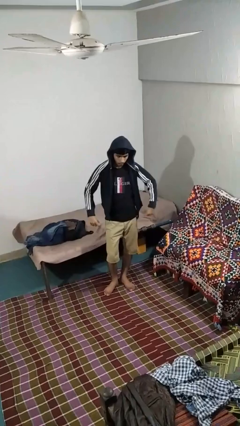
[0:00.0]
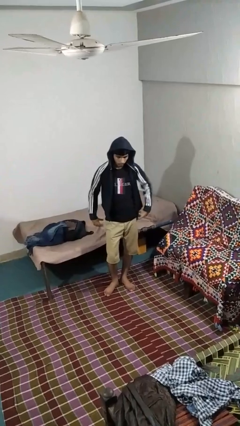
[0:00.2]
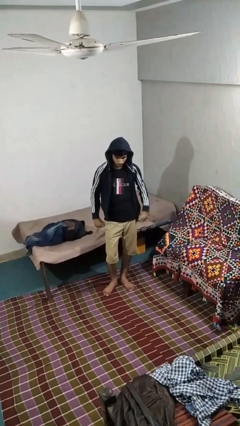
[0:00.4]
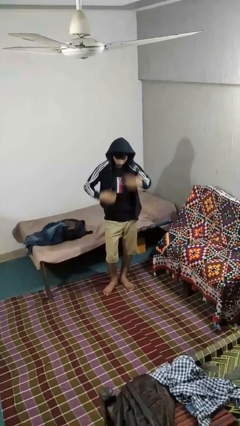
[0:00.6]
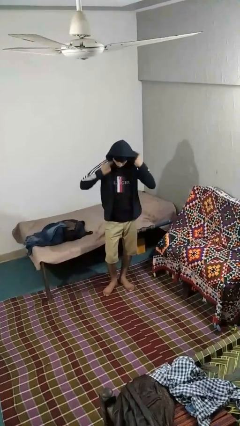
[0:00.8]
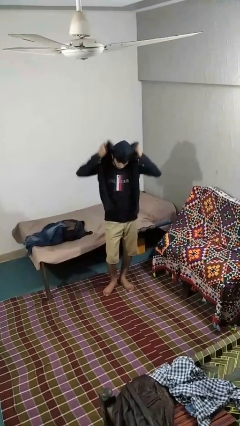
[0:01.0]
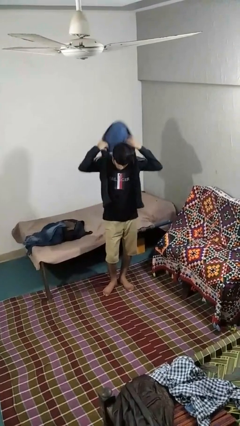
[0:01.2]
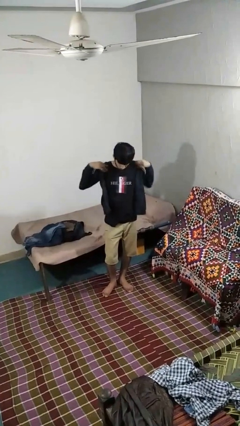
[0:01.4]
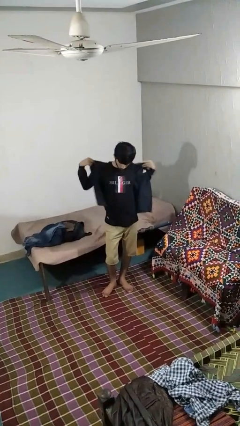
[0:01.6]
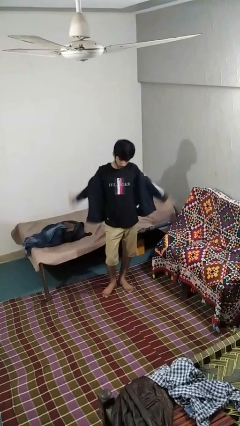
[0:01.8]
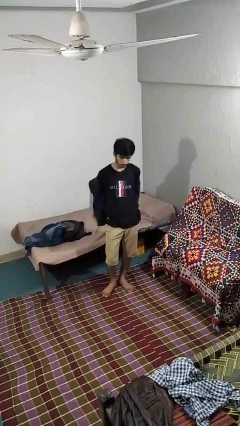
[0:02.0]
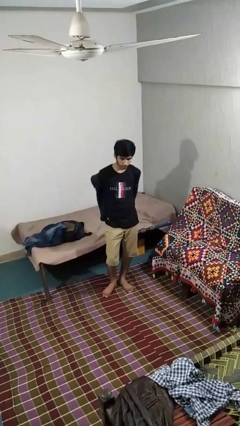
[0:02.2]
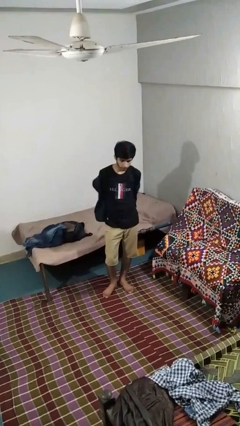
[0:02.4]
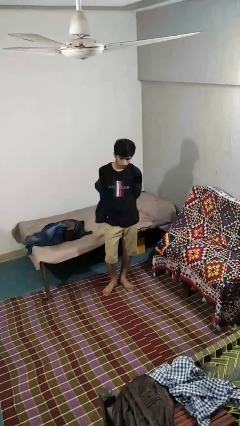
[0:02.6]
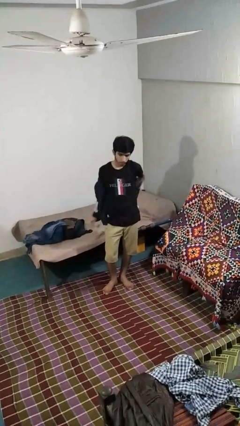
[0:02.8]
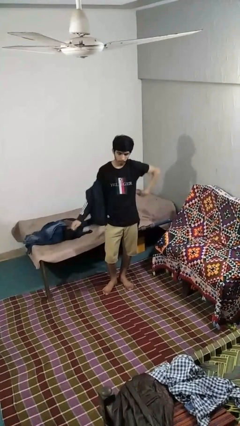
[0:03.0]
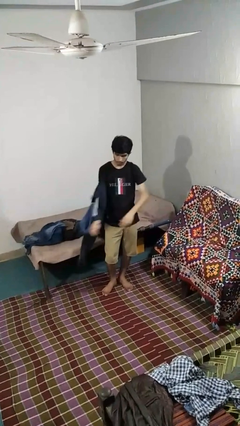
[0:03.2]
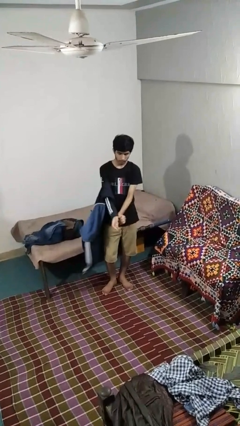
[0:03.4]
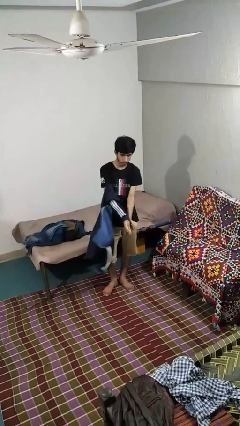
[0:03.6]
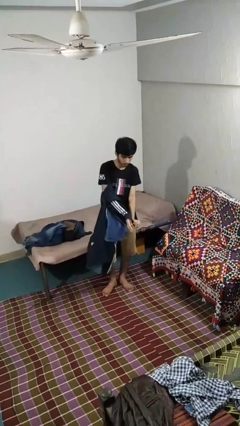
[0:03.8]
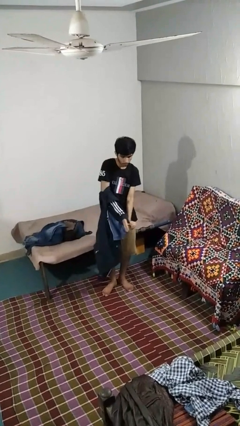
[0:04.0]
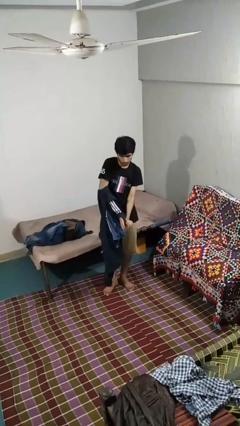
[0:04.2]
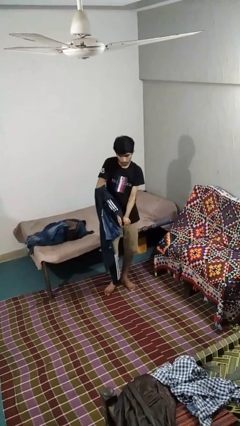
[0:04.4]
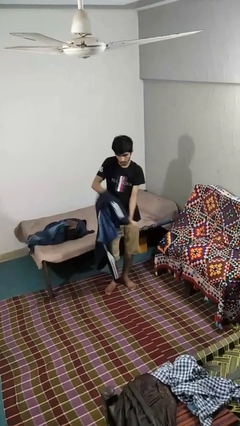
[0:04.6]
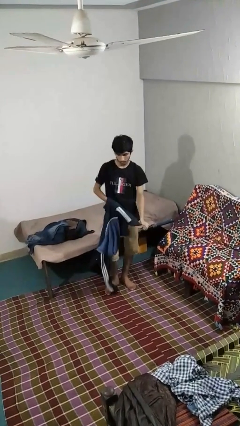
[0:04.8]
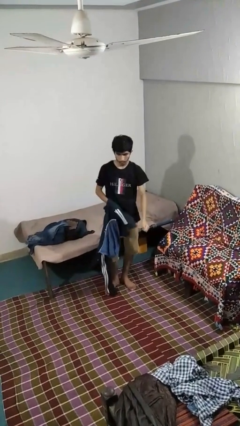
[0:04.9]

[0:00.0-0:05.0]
person takes off hoodie

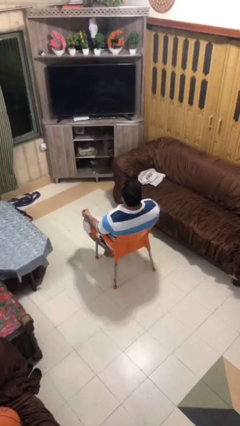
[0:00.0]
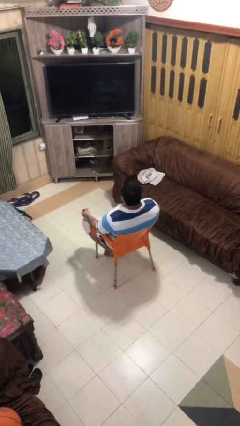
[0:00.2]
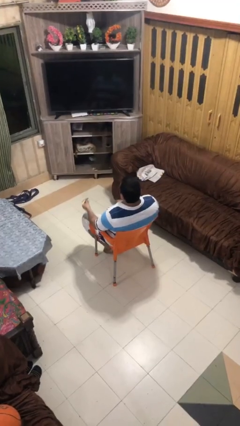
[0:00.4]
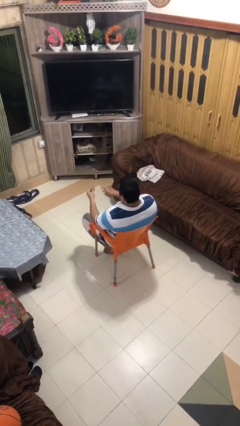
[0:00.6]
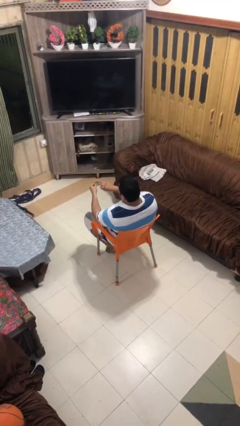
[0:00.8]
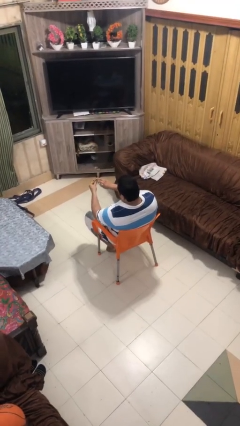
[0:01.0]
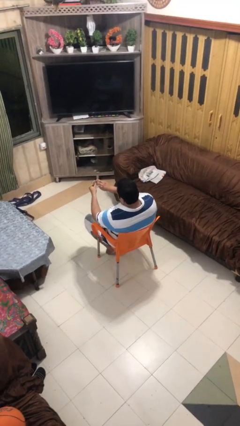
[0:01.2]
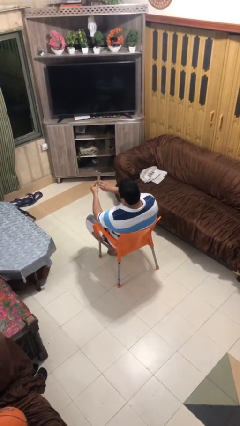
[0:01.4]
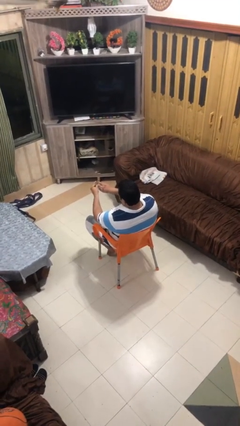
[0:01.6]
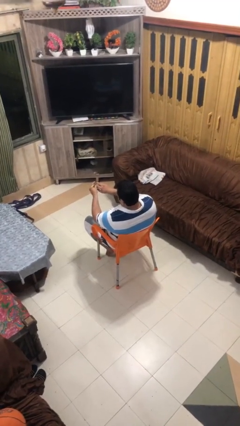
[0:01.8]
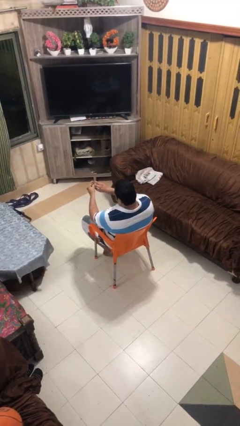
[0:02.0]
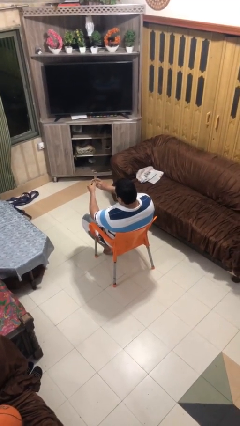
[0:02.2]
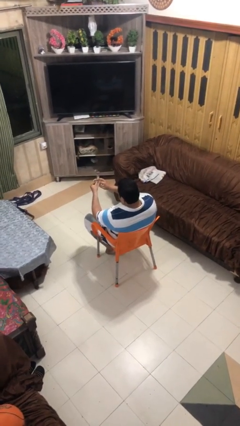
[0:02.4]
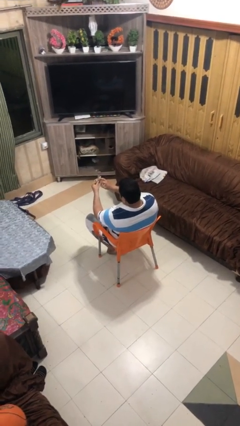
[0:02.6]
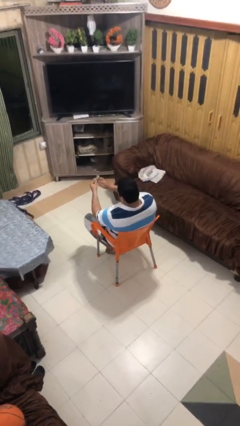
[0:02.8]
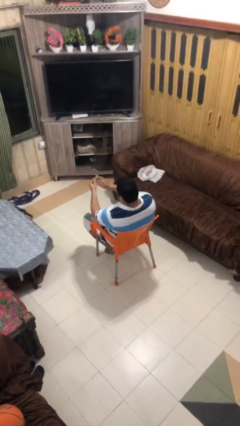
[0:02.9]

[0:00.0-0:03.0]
person files fingernails

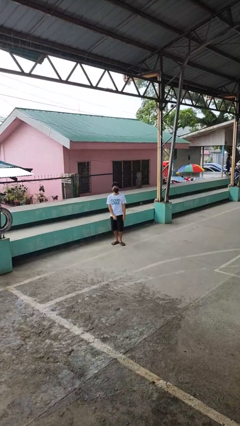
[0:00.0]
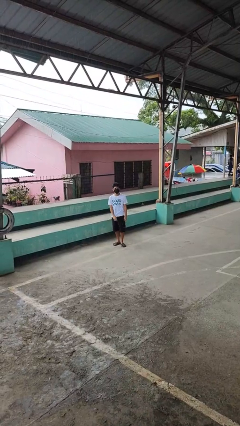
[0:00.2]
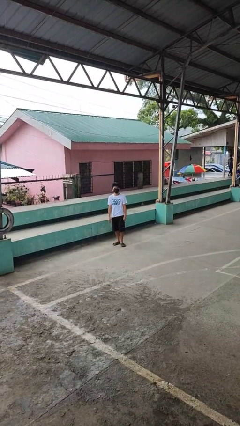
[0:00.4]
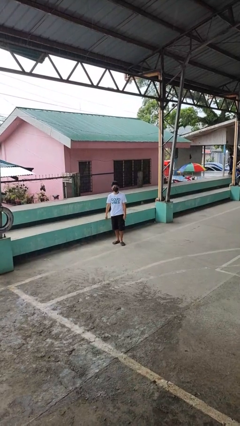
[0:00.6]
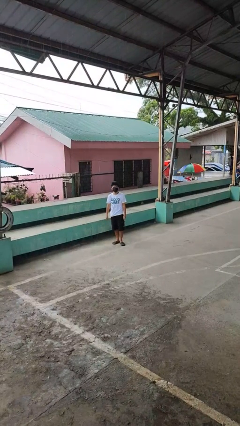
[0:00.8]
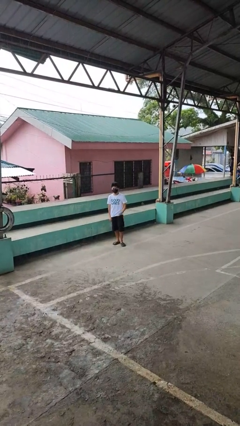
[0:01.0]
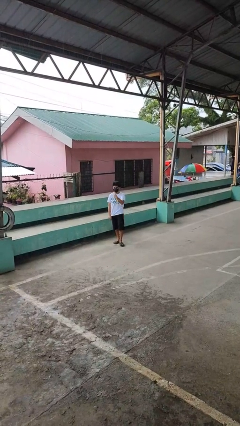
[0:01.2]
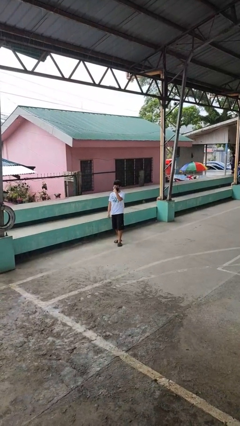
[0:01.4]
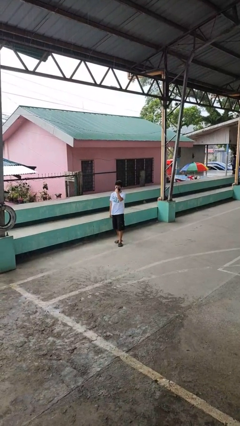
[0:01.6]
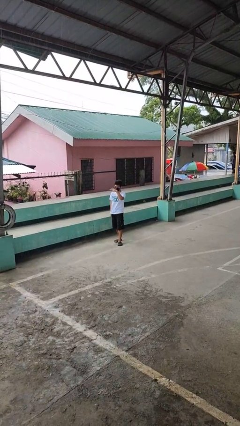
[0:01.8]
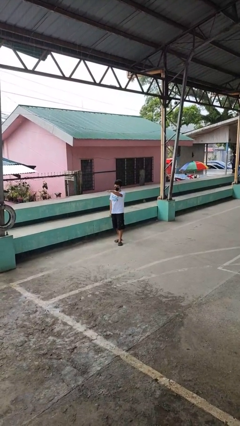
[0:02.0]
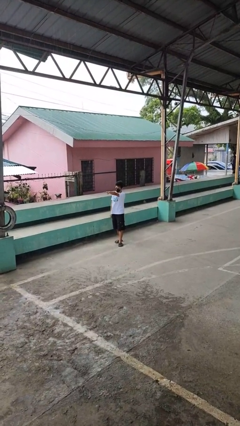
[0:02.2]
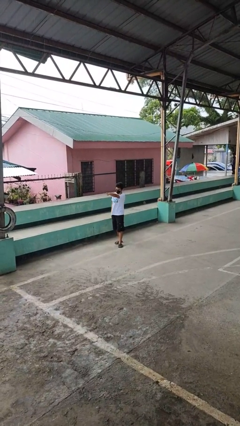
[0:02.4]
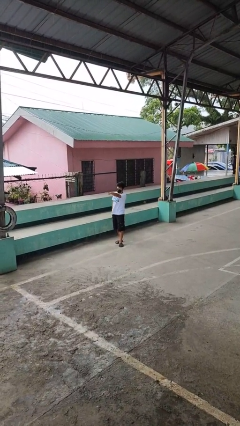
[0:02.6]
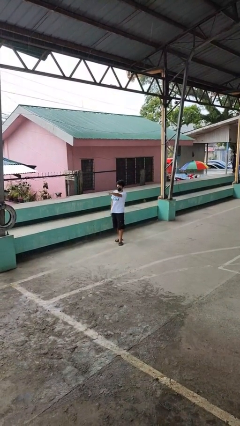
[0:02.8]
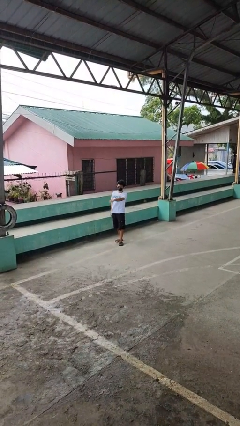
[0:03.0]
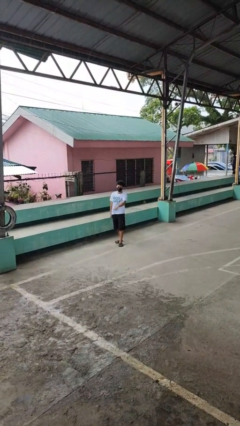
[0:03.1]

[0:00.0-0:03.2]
person gestures watch closely

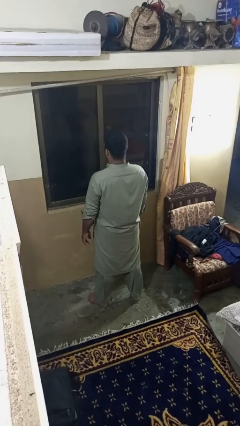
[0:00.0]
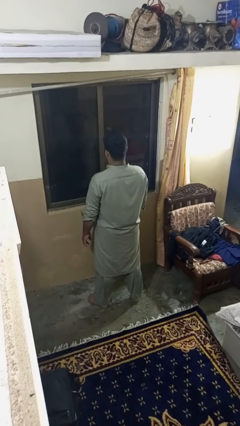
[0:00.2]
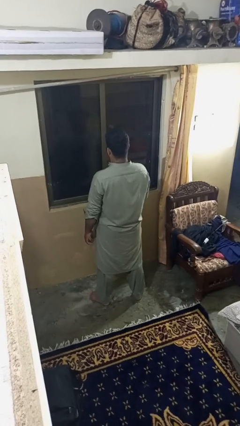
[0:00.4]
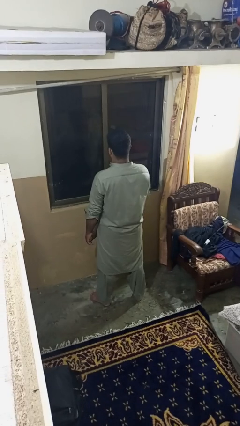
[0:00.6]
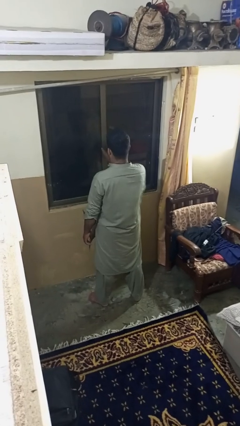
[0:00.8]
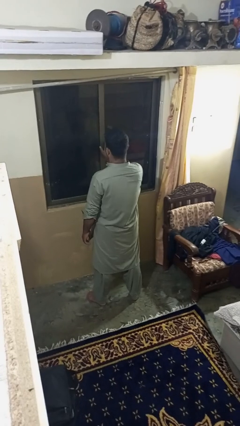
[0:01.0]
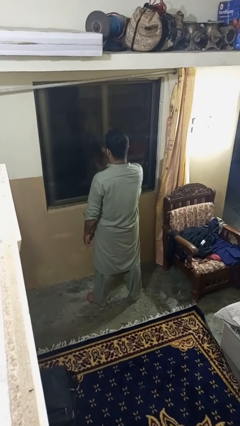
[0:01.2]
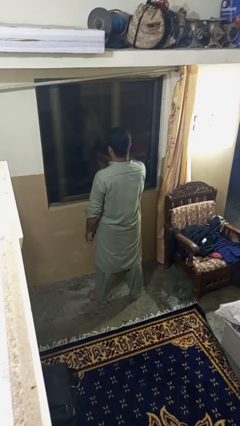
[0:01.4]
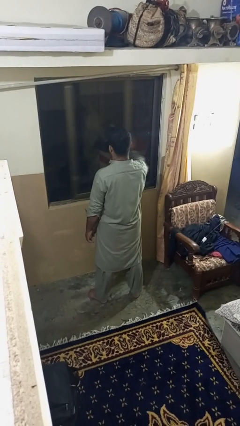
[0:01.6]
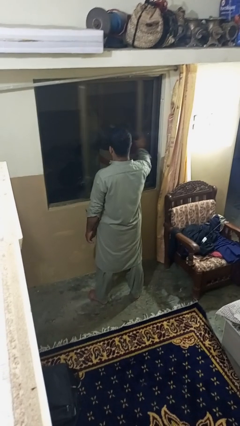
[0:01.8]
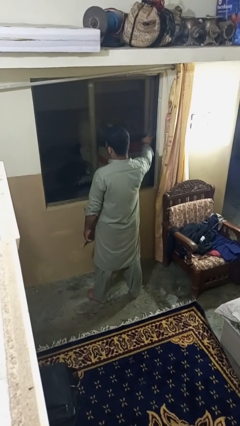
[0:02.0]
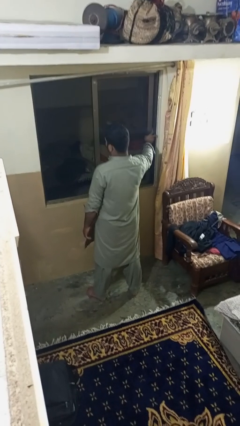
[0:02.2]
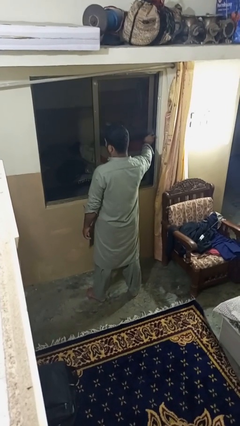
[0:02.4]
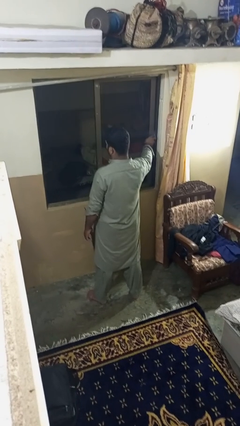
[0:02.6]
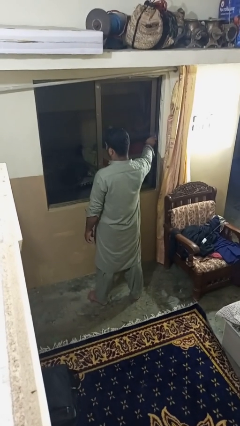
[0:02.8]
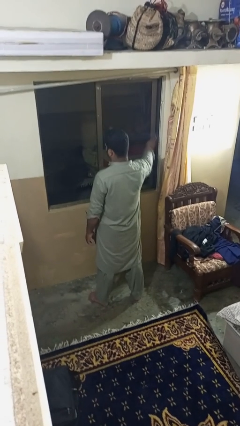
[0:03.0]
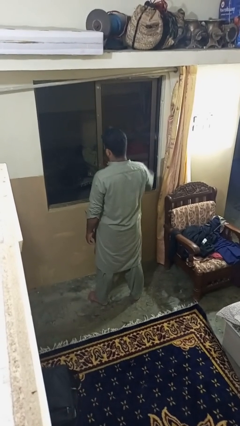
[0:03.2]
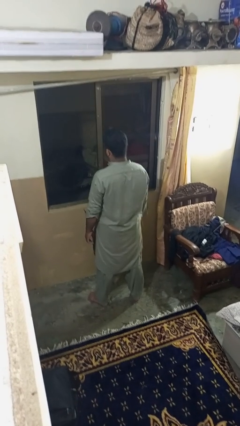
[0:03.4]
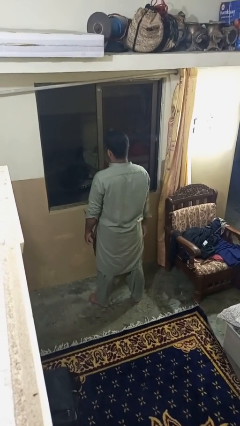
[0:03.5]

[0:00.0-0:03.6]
person opens home window

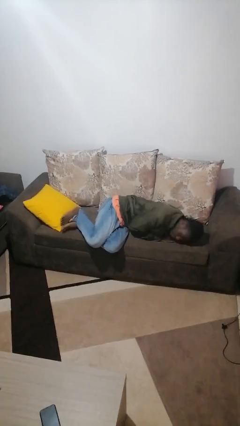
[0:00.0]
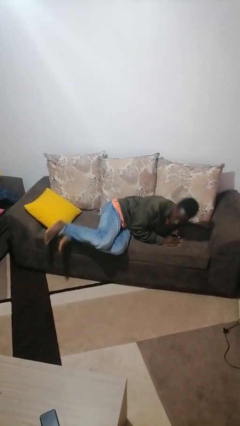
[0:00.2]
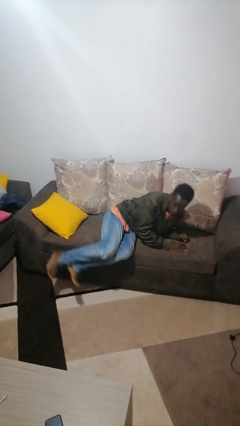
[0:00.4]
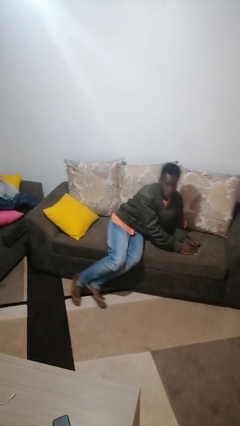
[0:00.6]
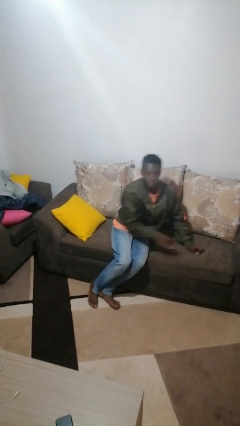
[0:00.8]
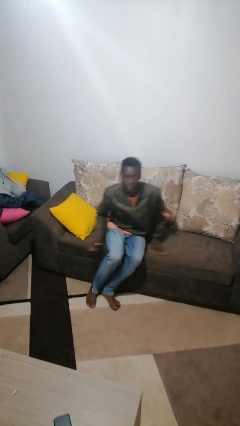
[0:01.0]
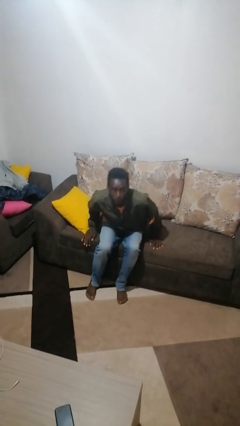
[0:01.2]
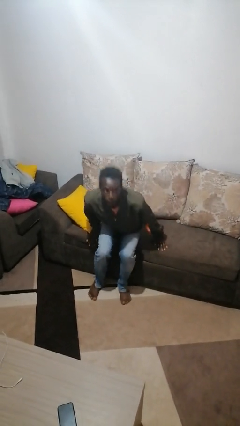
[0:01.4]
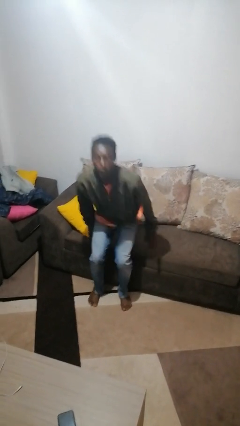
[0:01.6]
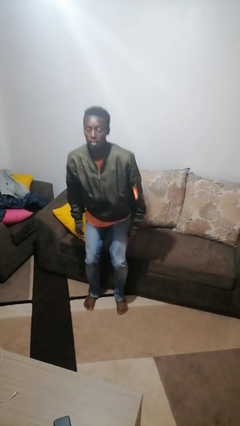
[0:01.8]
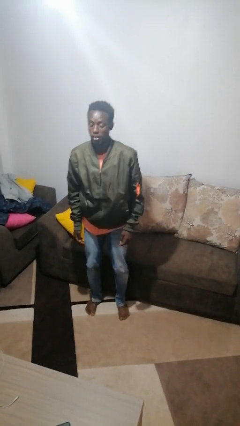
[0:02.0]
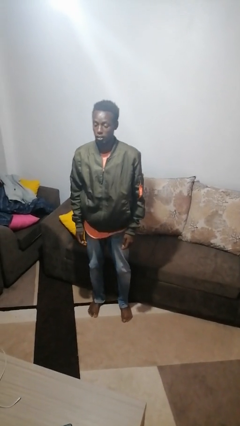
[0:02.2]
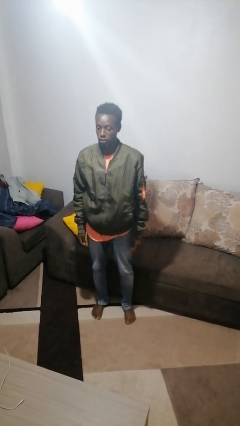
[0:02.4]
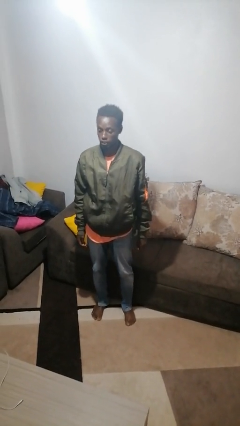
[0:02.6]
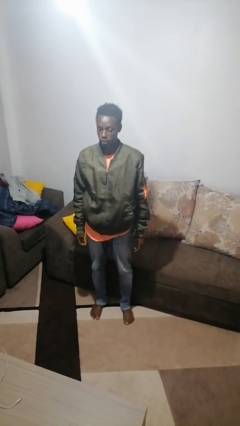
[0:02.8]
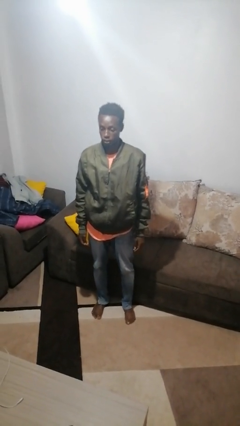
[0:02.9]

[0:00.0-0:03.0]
person stands up
